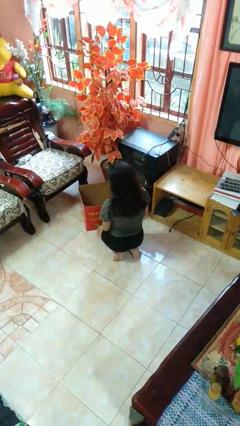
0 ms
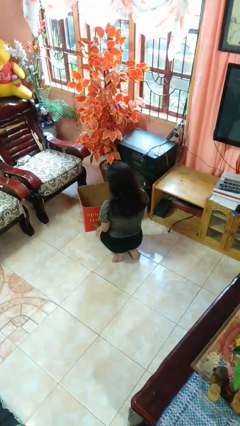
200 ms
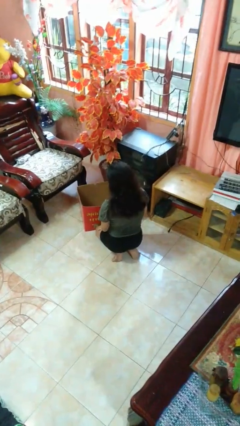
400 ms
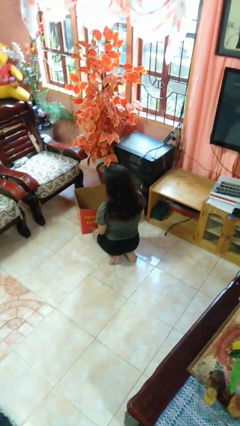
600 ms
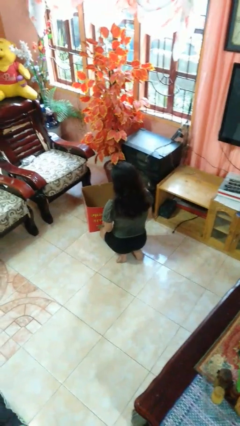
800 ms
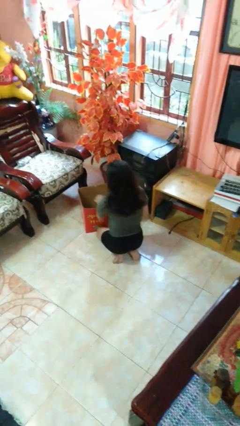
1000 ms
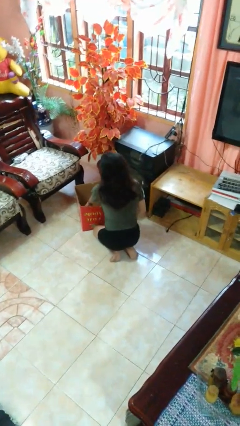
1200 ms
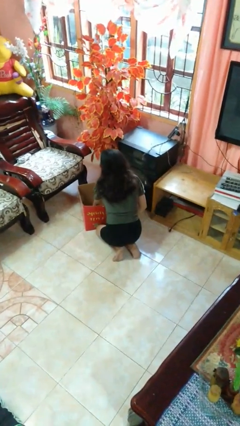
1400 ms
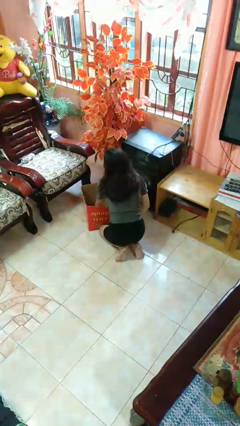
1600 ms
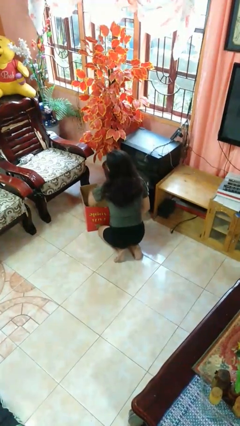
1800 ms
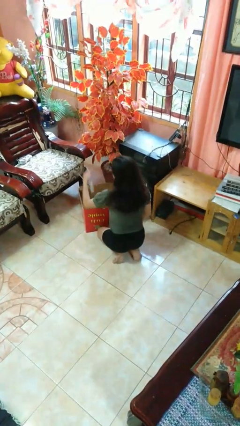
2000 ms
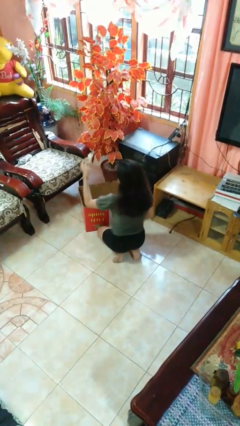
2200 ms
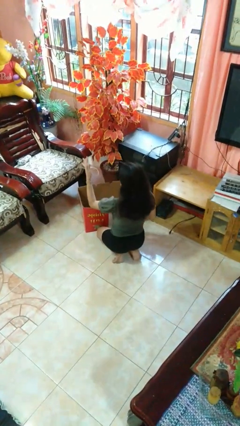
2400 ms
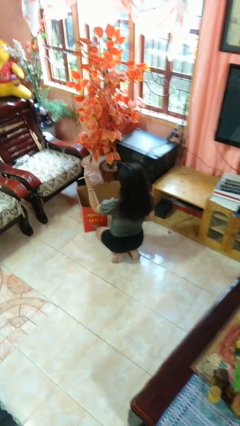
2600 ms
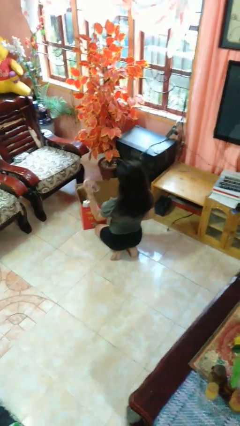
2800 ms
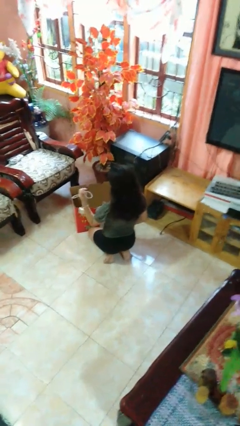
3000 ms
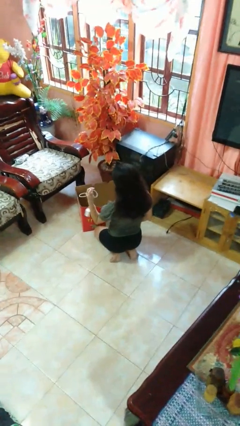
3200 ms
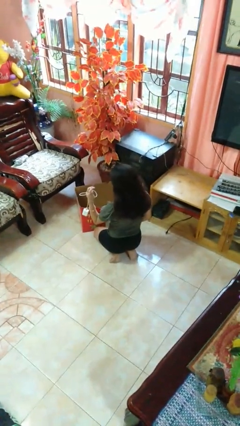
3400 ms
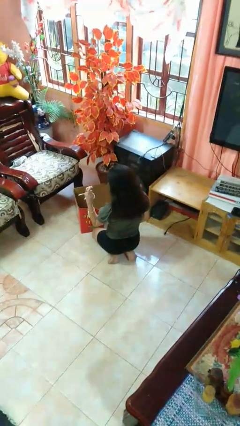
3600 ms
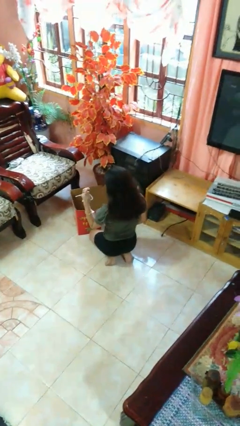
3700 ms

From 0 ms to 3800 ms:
person takes object from box

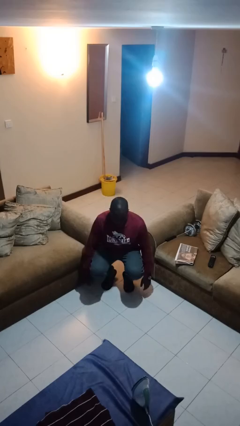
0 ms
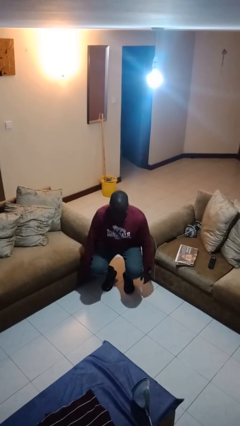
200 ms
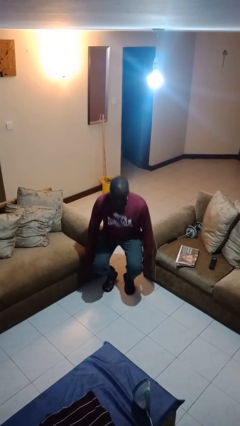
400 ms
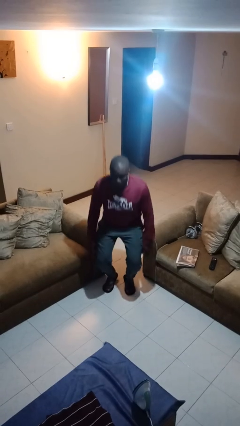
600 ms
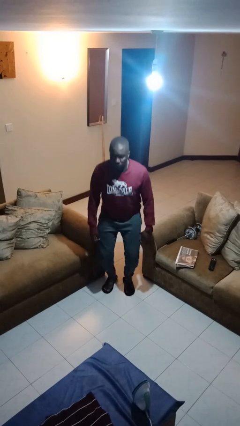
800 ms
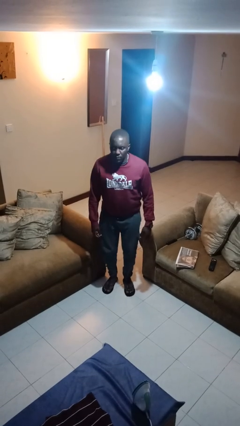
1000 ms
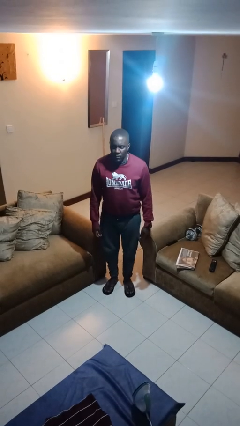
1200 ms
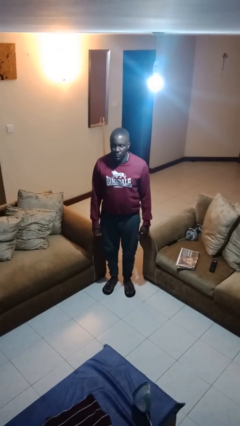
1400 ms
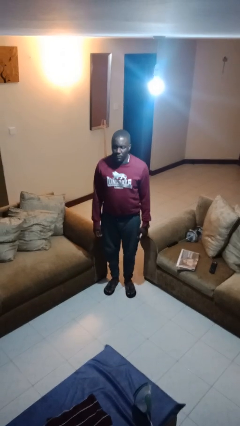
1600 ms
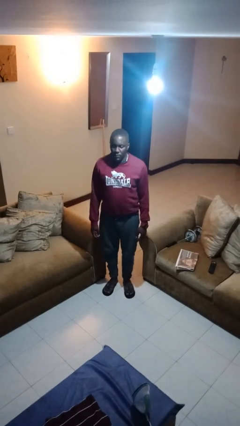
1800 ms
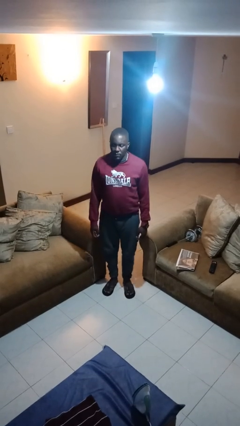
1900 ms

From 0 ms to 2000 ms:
person stands up

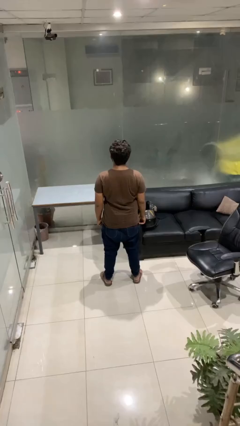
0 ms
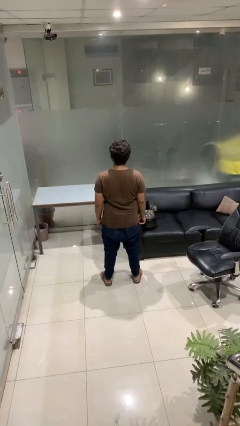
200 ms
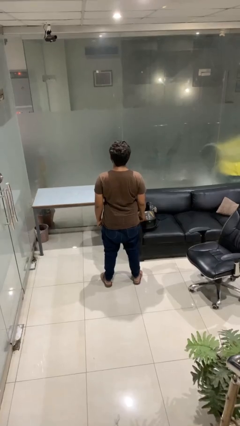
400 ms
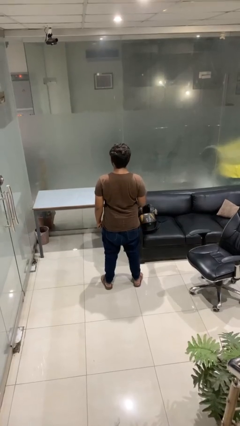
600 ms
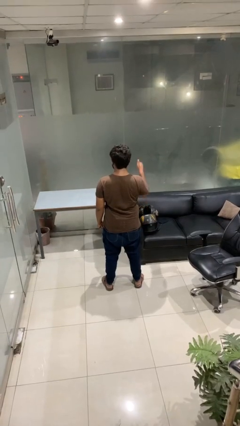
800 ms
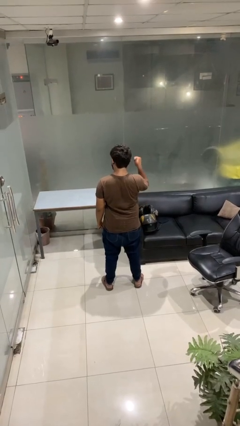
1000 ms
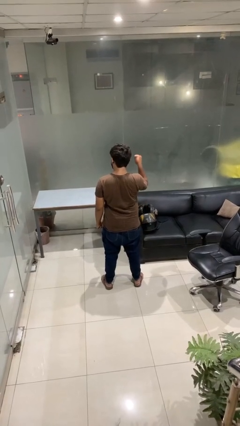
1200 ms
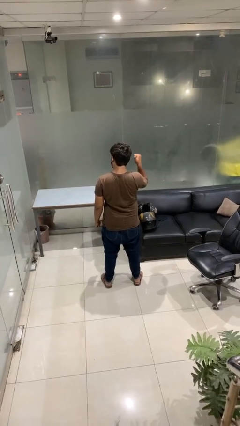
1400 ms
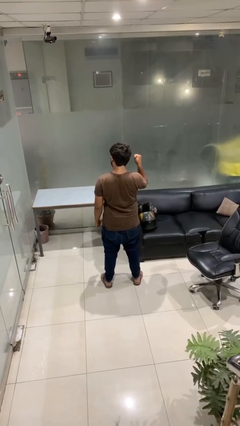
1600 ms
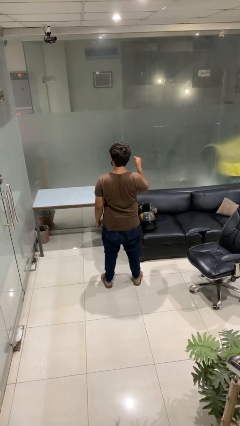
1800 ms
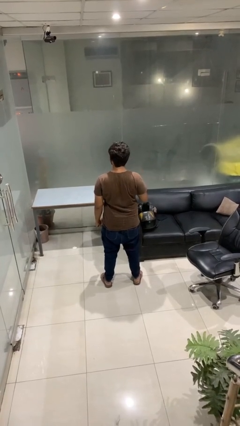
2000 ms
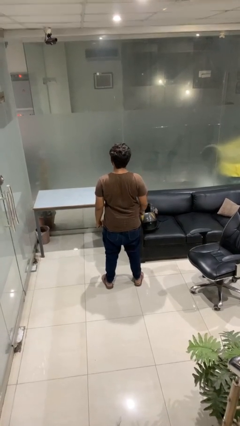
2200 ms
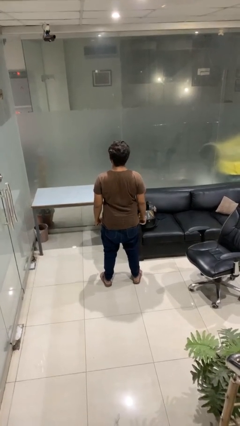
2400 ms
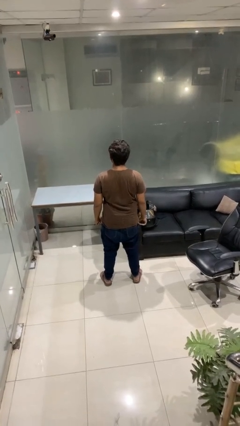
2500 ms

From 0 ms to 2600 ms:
person gestures behind me

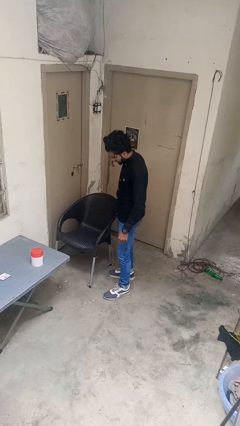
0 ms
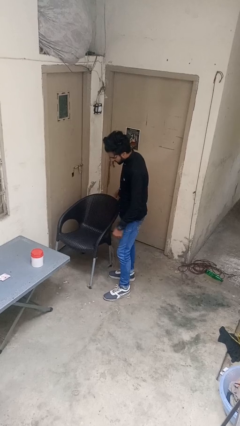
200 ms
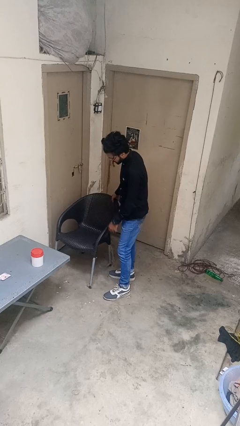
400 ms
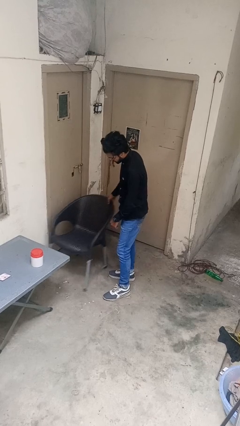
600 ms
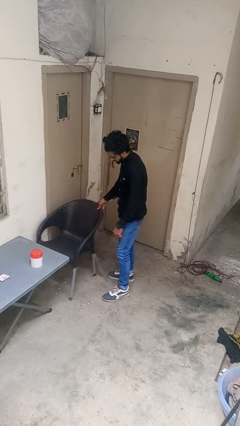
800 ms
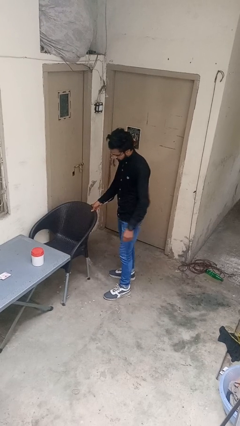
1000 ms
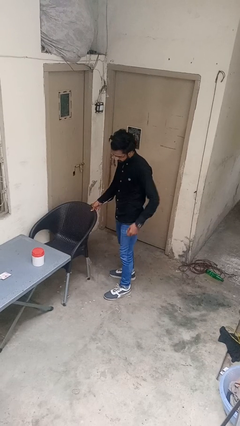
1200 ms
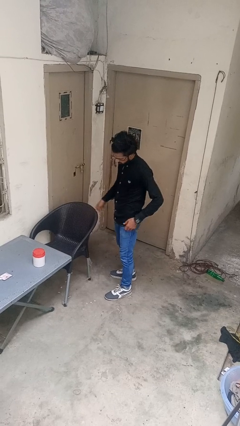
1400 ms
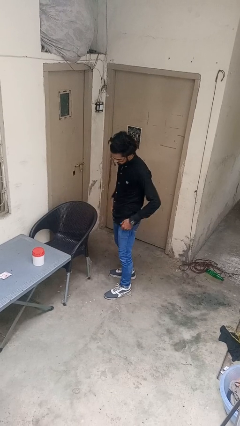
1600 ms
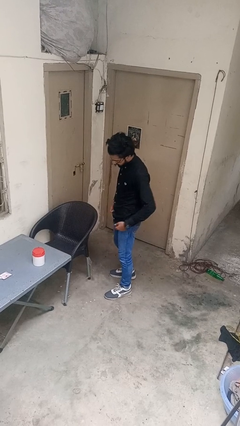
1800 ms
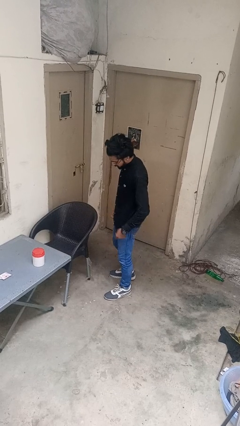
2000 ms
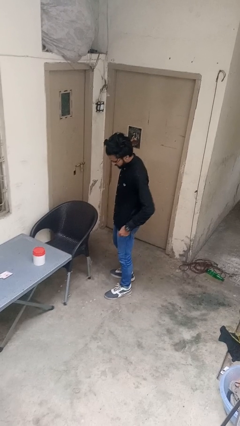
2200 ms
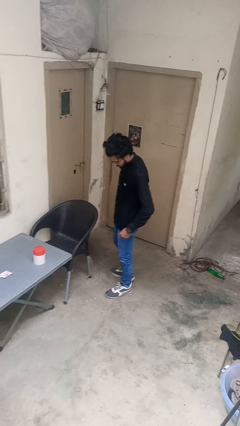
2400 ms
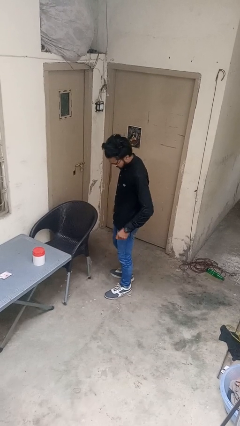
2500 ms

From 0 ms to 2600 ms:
person pushes in chair

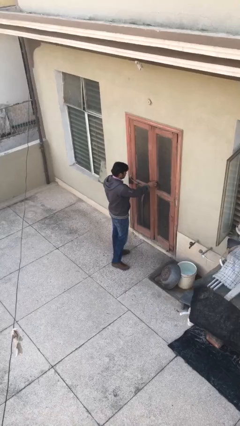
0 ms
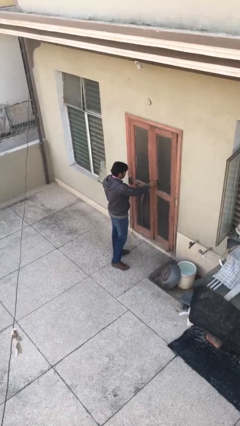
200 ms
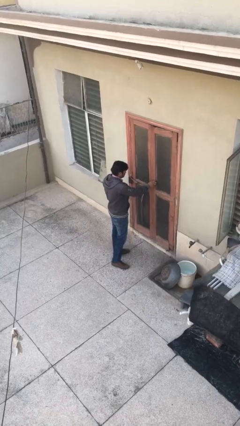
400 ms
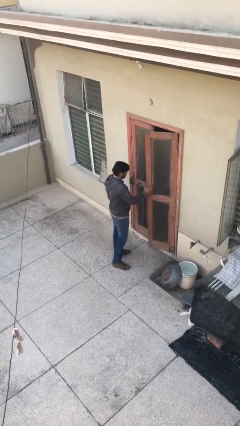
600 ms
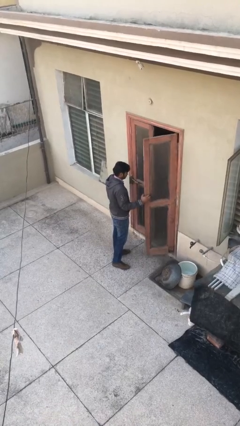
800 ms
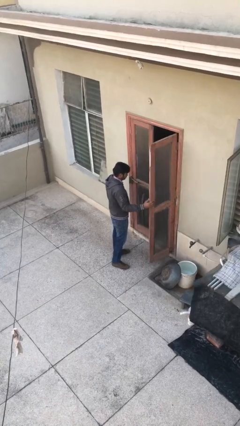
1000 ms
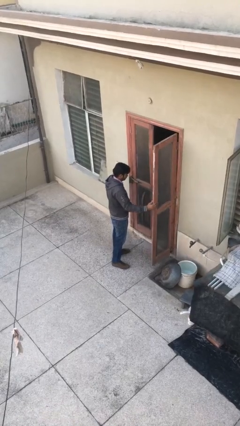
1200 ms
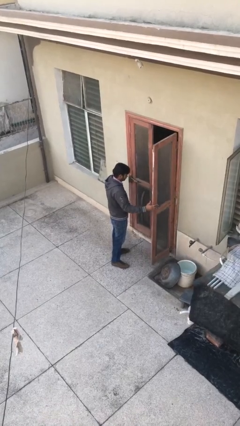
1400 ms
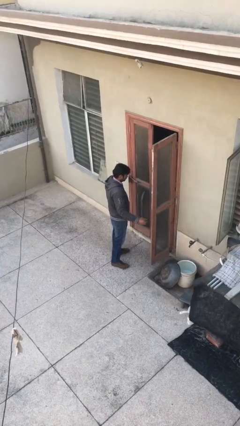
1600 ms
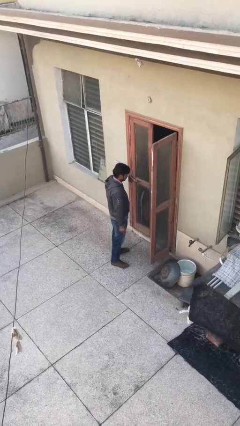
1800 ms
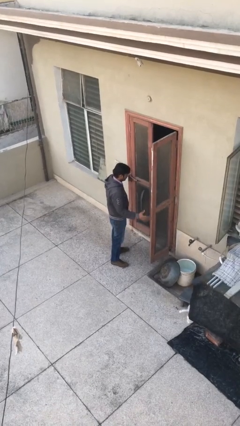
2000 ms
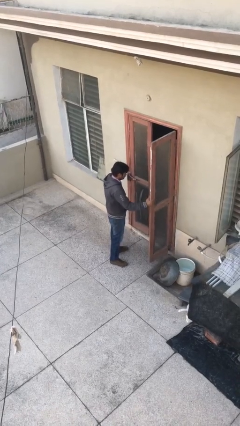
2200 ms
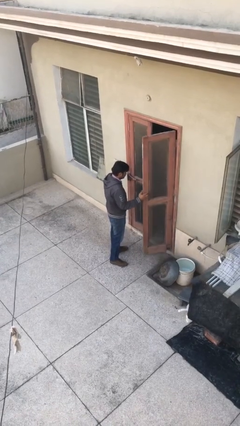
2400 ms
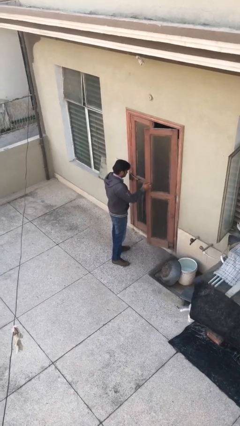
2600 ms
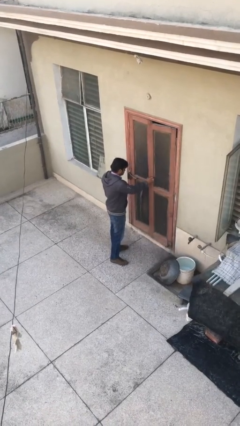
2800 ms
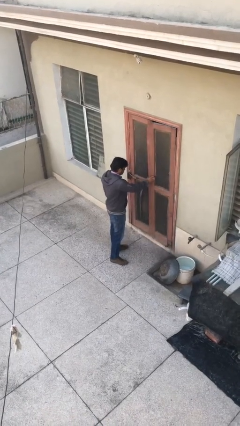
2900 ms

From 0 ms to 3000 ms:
person opens facility door

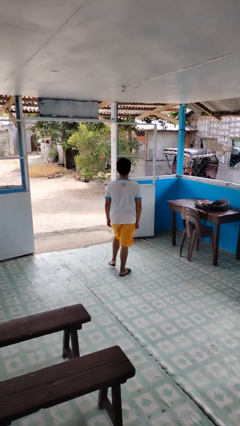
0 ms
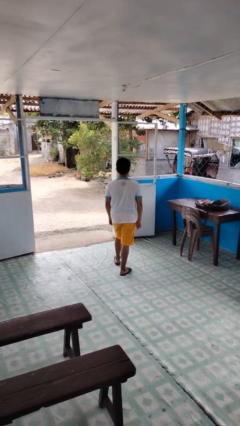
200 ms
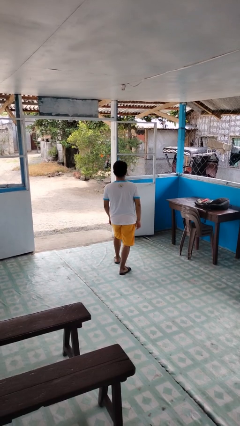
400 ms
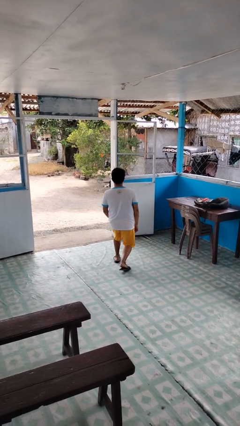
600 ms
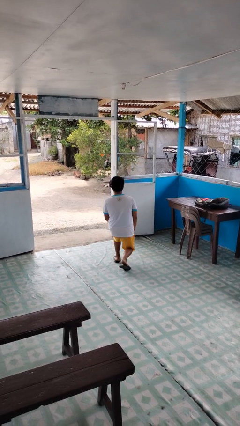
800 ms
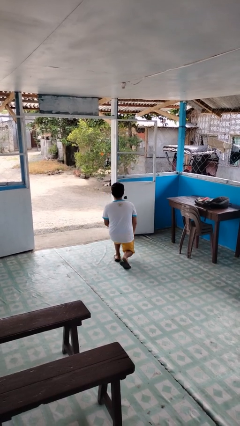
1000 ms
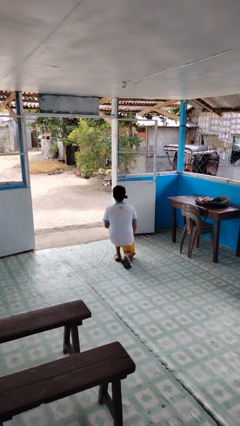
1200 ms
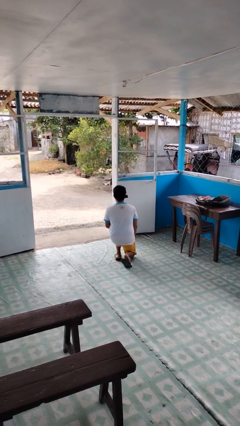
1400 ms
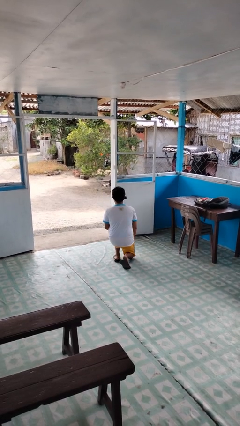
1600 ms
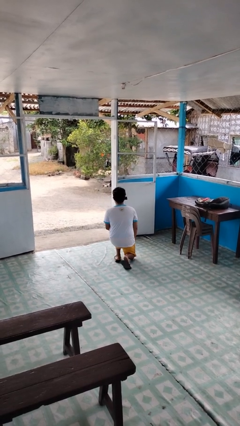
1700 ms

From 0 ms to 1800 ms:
person kneels

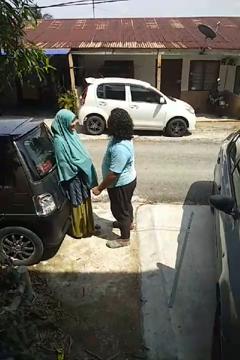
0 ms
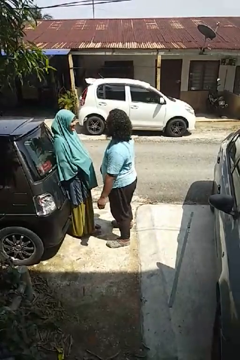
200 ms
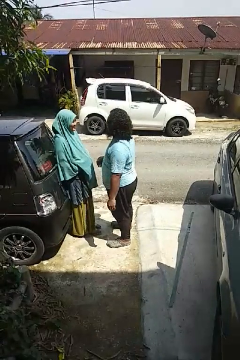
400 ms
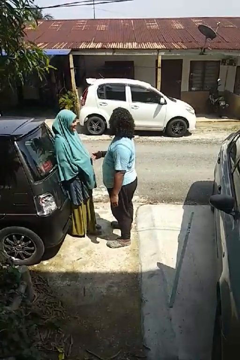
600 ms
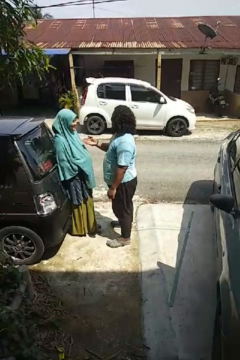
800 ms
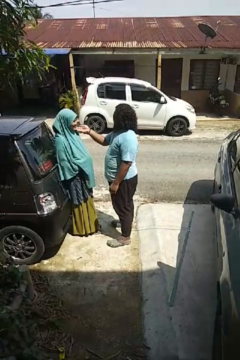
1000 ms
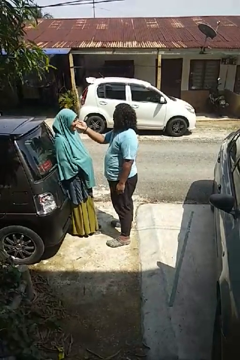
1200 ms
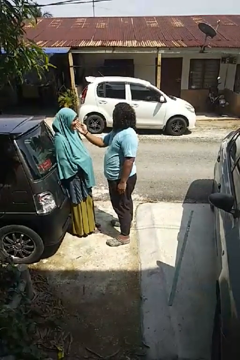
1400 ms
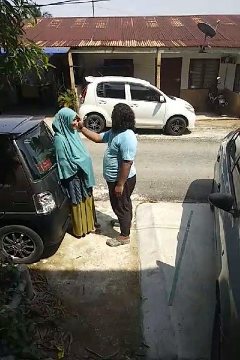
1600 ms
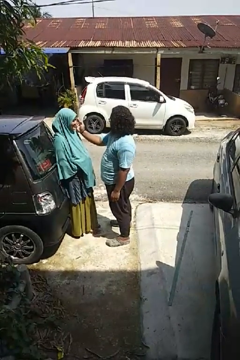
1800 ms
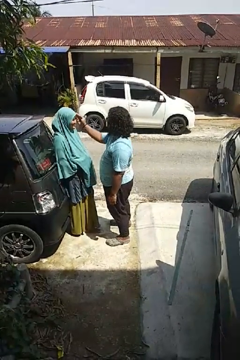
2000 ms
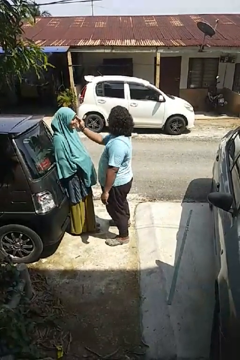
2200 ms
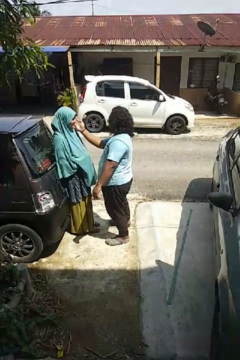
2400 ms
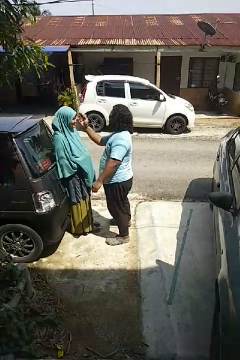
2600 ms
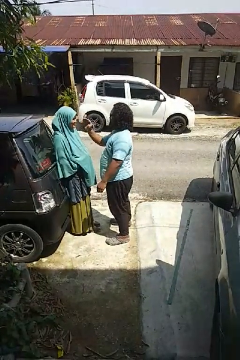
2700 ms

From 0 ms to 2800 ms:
person touches face of person
